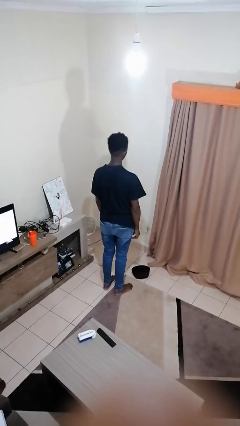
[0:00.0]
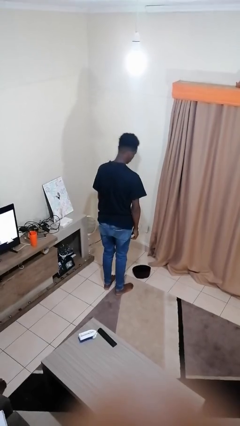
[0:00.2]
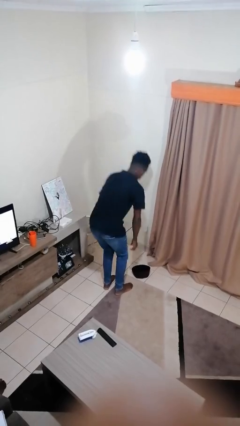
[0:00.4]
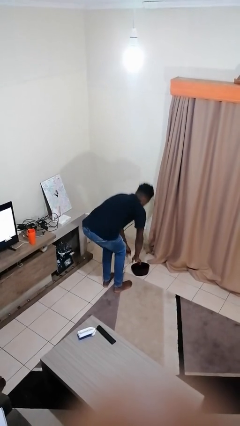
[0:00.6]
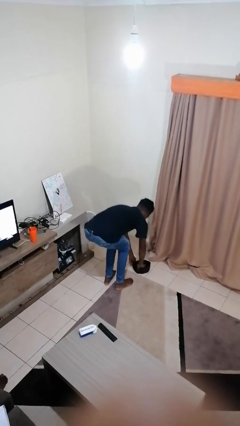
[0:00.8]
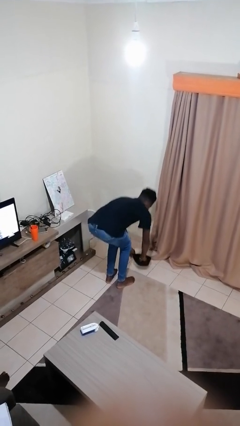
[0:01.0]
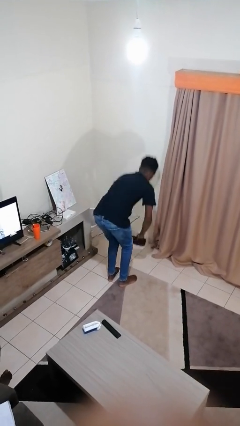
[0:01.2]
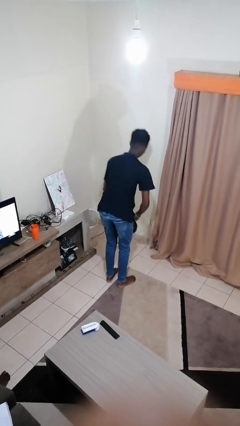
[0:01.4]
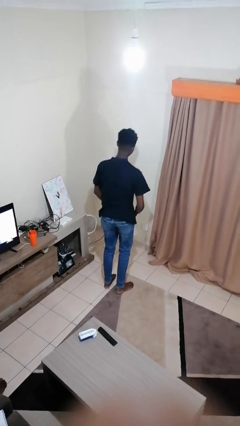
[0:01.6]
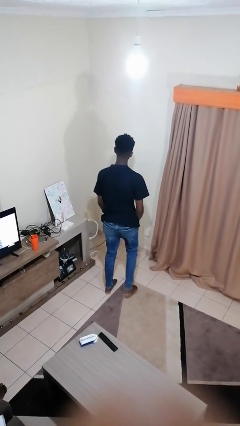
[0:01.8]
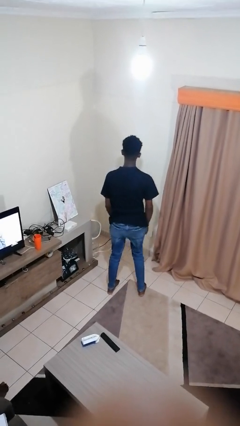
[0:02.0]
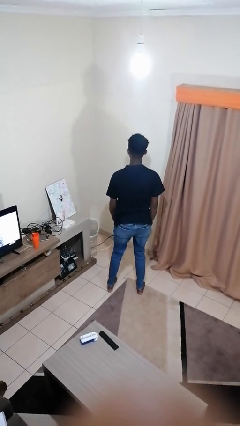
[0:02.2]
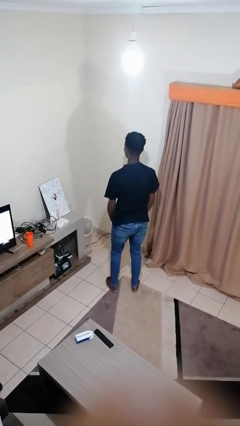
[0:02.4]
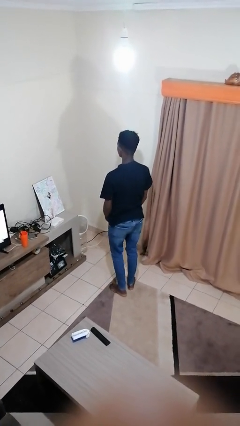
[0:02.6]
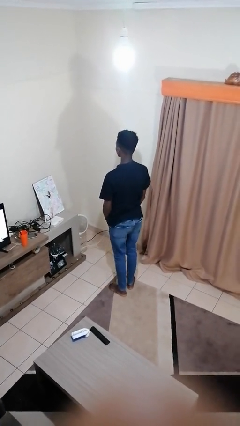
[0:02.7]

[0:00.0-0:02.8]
person picks up object from floor

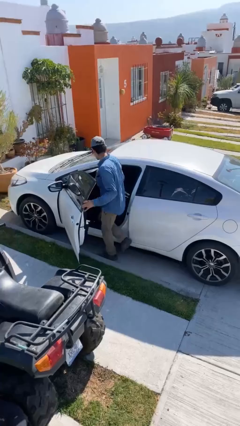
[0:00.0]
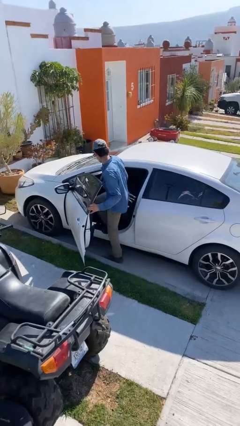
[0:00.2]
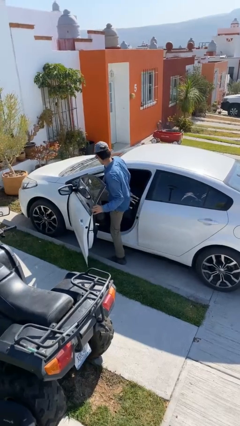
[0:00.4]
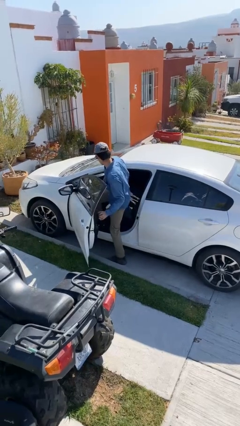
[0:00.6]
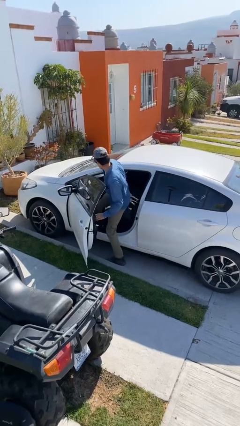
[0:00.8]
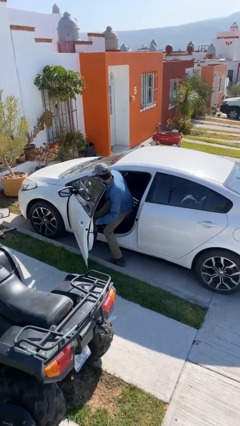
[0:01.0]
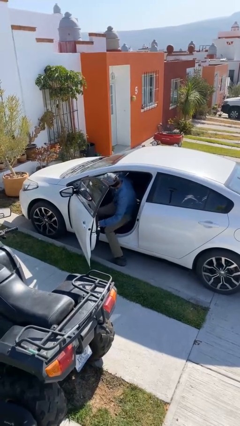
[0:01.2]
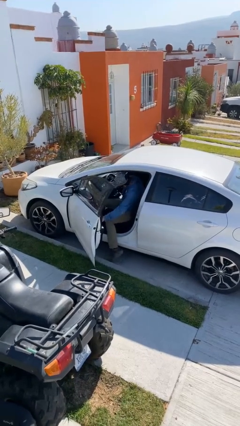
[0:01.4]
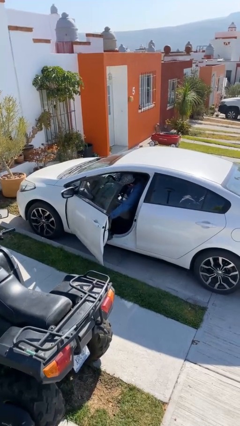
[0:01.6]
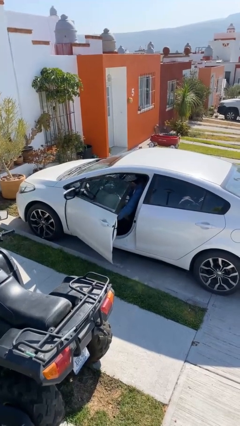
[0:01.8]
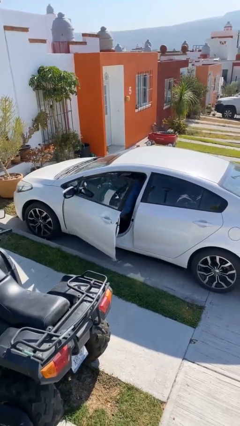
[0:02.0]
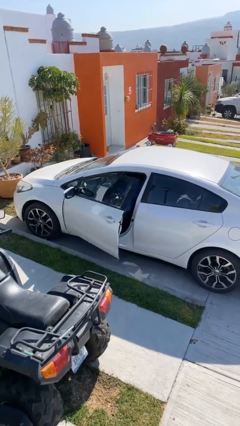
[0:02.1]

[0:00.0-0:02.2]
person enters car

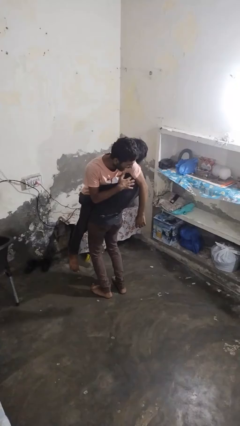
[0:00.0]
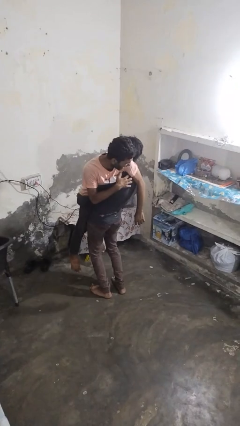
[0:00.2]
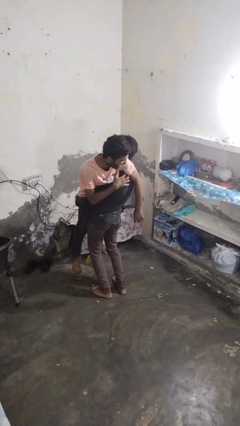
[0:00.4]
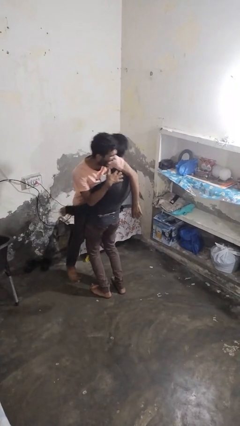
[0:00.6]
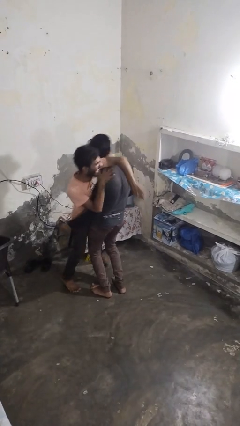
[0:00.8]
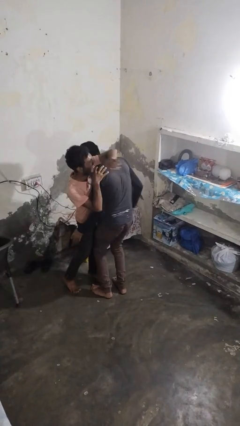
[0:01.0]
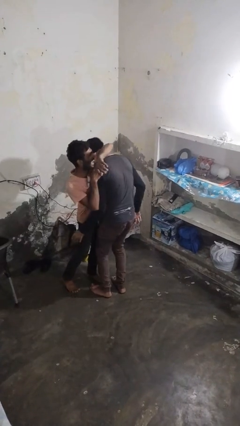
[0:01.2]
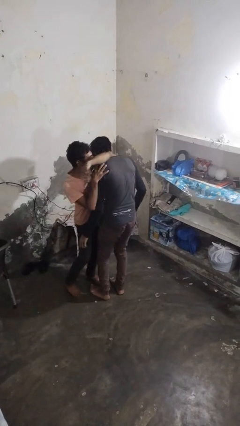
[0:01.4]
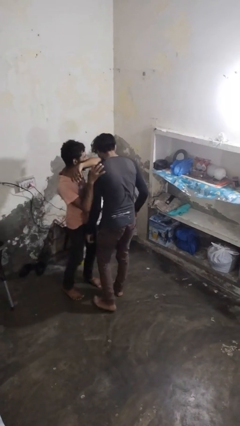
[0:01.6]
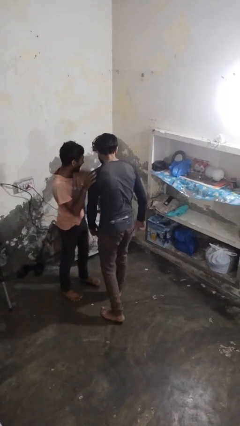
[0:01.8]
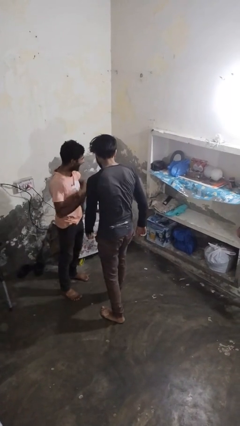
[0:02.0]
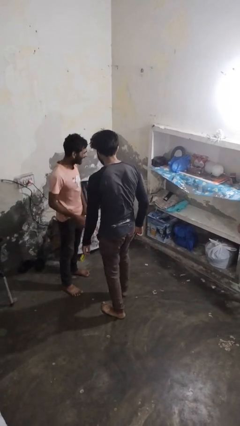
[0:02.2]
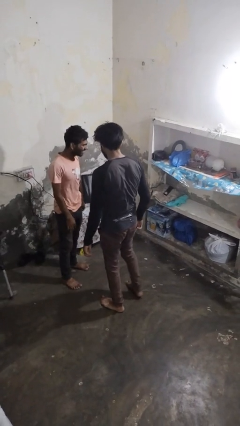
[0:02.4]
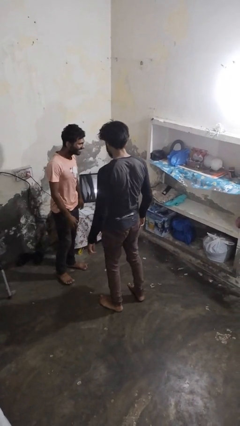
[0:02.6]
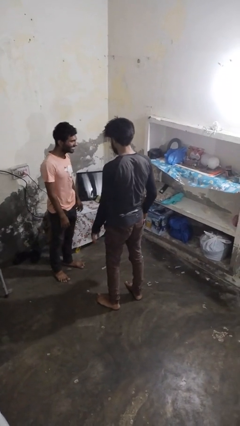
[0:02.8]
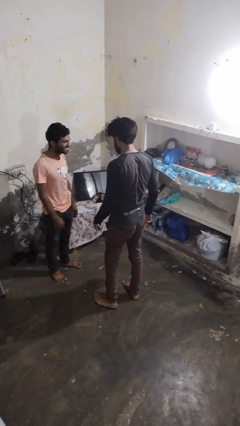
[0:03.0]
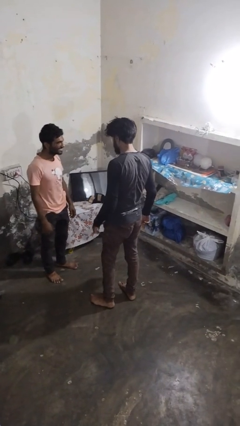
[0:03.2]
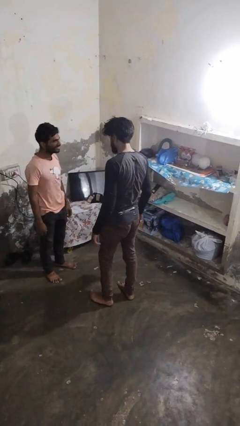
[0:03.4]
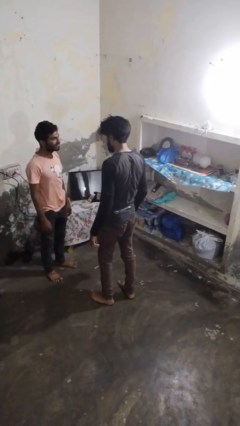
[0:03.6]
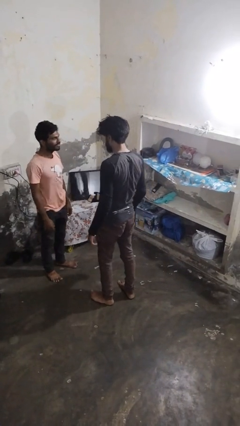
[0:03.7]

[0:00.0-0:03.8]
person puts down person

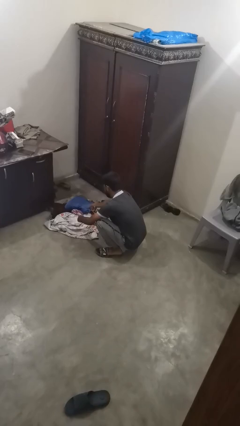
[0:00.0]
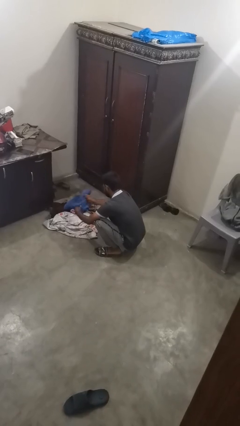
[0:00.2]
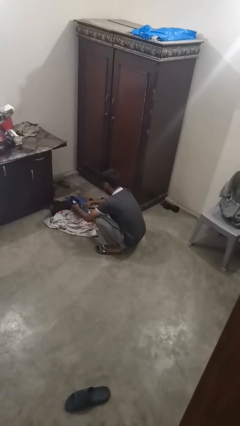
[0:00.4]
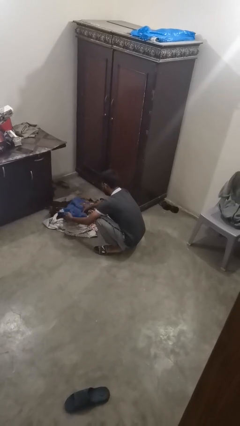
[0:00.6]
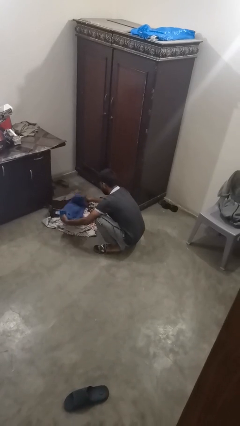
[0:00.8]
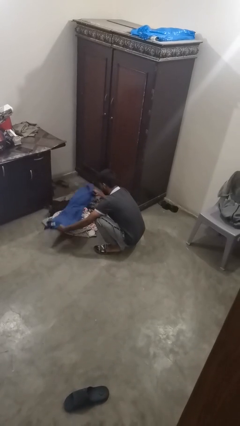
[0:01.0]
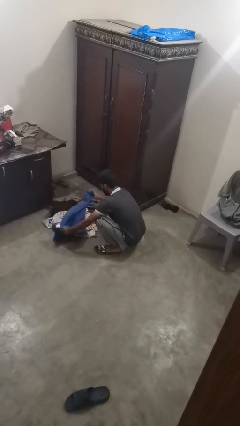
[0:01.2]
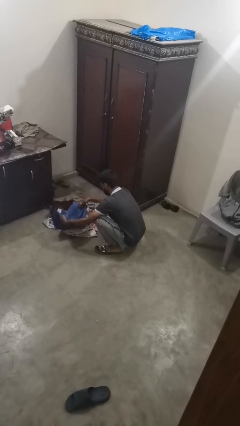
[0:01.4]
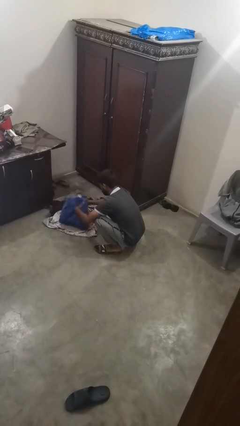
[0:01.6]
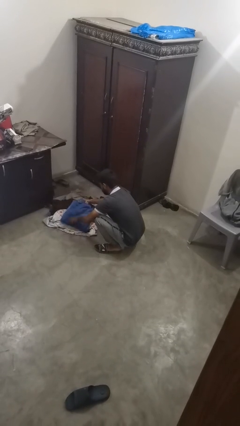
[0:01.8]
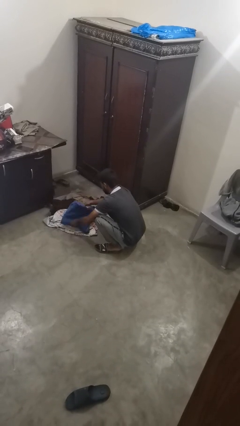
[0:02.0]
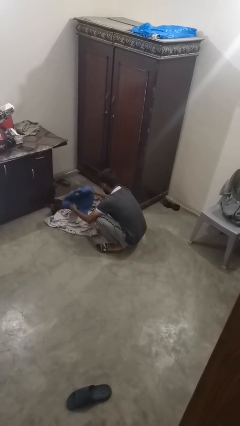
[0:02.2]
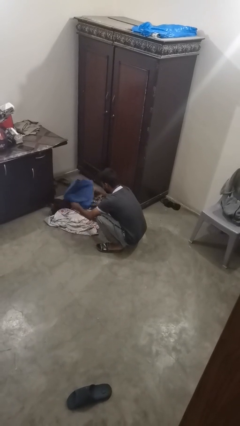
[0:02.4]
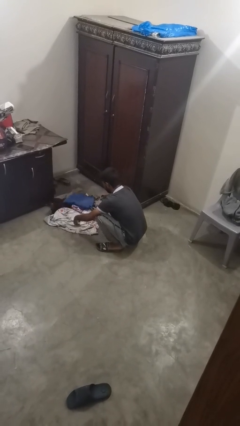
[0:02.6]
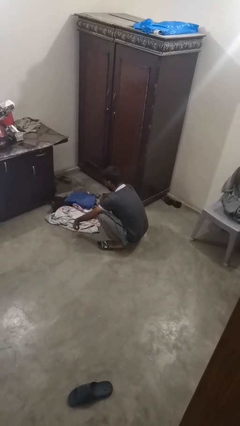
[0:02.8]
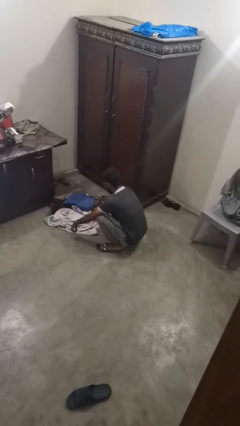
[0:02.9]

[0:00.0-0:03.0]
person folds pants

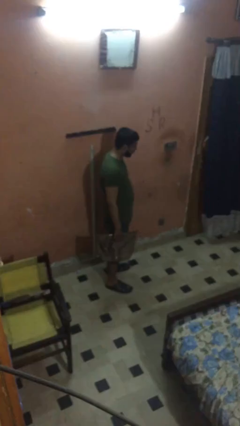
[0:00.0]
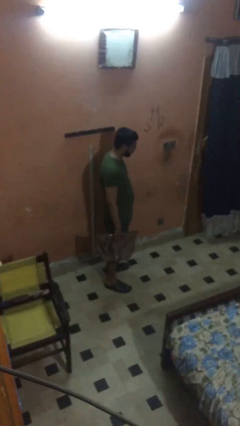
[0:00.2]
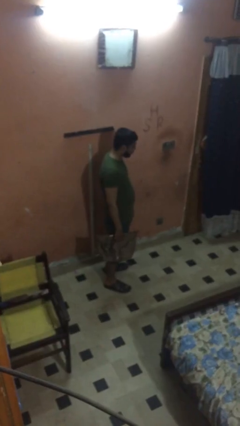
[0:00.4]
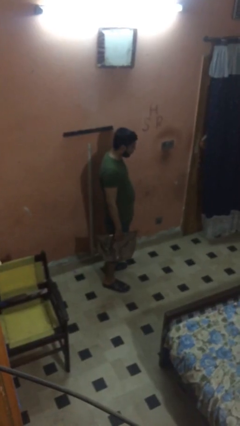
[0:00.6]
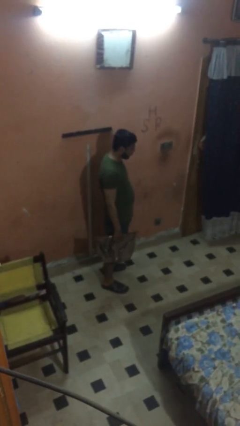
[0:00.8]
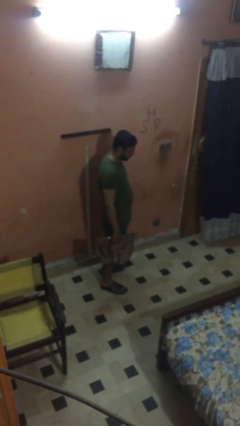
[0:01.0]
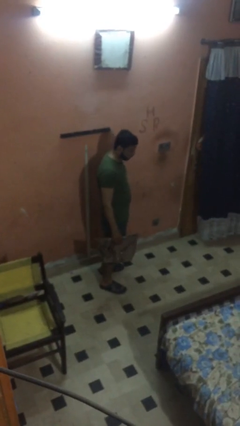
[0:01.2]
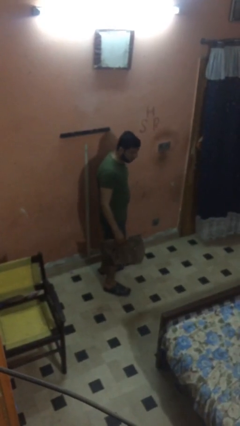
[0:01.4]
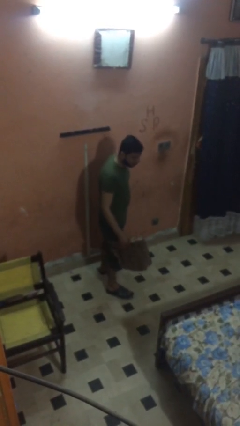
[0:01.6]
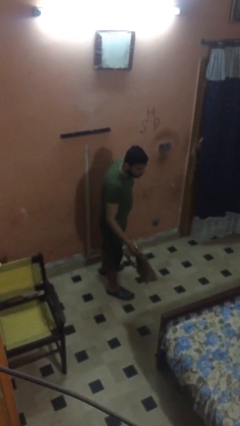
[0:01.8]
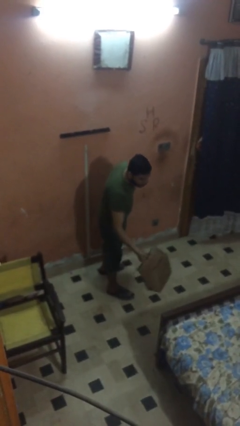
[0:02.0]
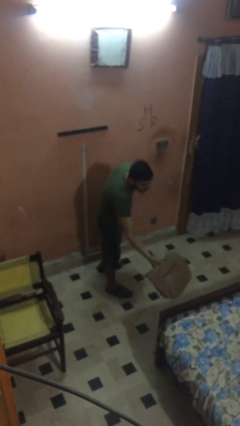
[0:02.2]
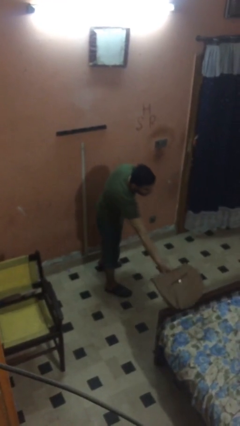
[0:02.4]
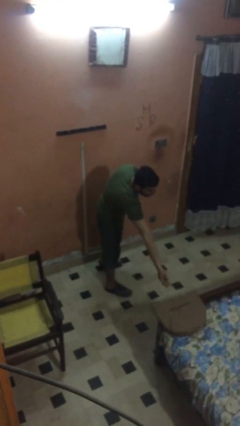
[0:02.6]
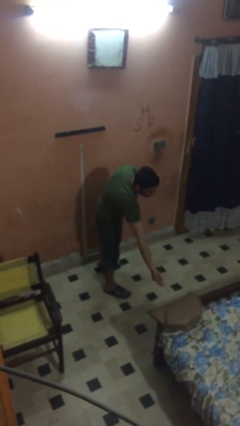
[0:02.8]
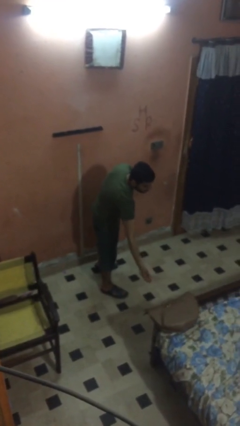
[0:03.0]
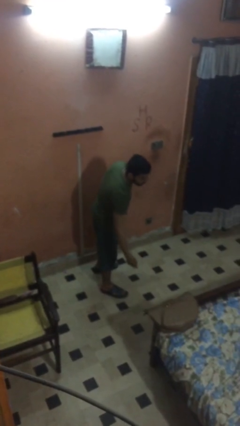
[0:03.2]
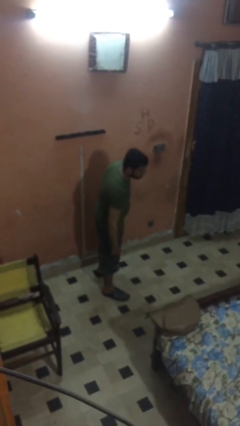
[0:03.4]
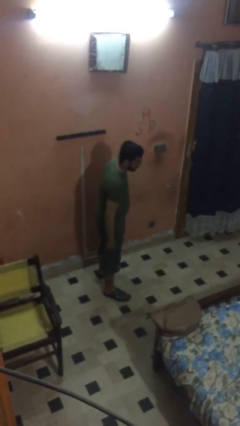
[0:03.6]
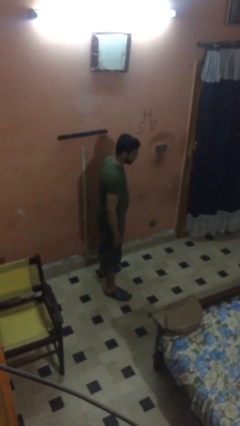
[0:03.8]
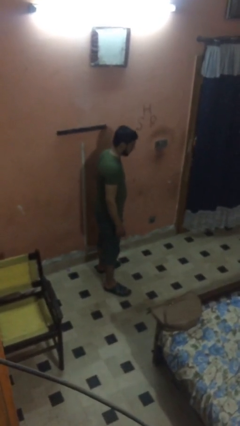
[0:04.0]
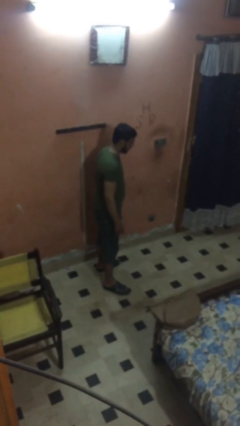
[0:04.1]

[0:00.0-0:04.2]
person puts down object on table

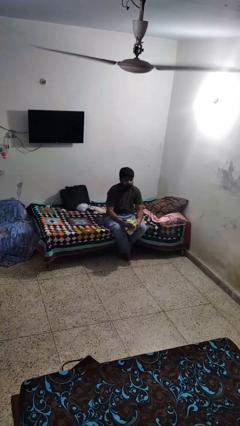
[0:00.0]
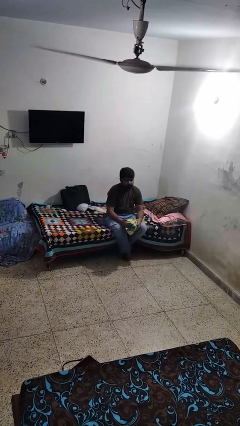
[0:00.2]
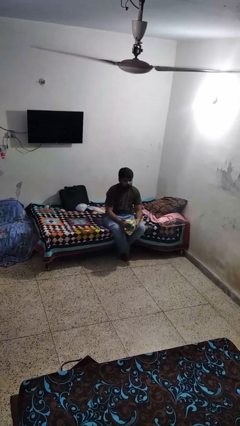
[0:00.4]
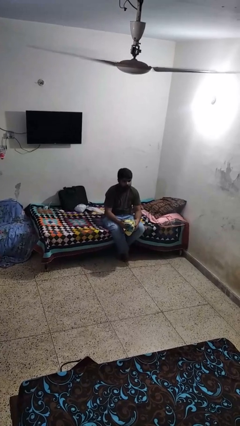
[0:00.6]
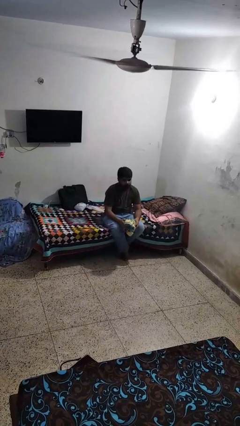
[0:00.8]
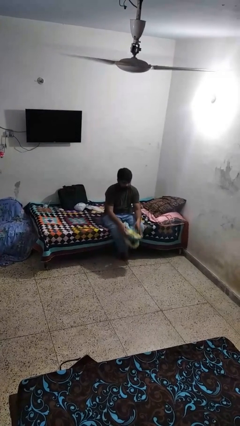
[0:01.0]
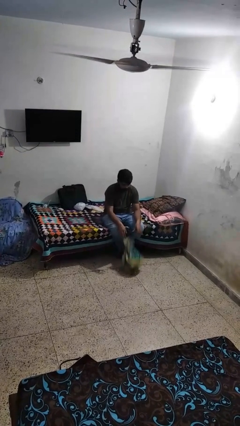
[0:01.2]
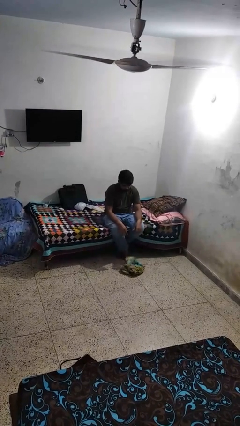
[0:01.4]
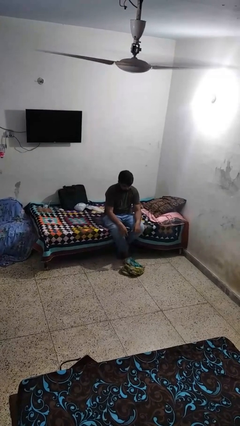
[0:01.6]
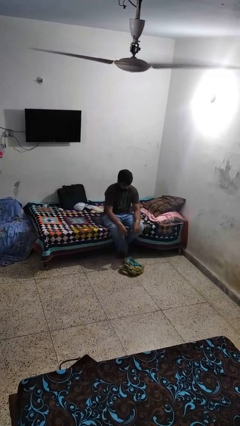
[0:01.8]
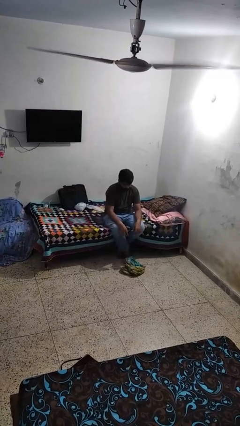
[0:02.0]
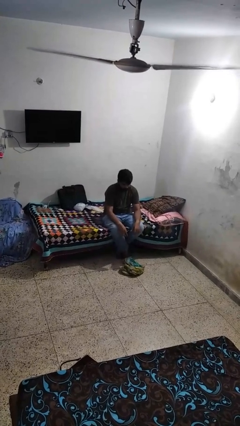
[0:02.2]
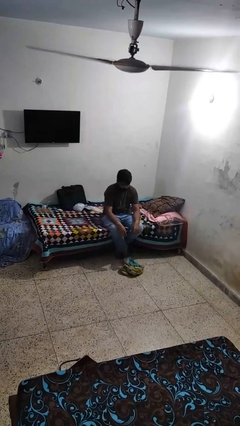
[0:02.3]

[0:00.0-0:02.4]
person drops object
